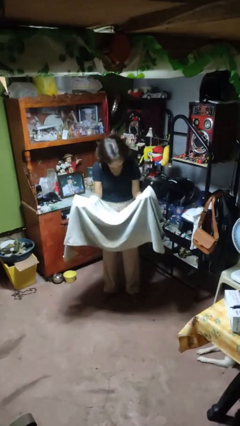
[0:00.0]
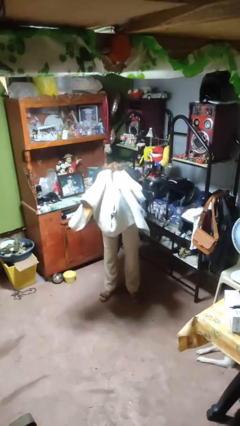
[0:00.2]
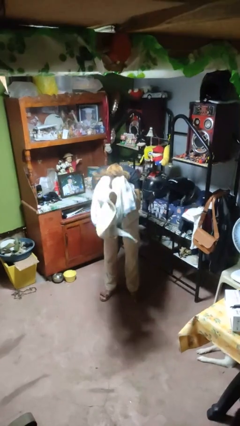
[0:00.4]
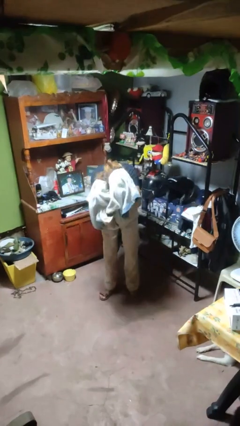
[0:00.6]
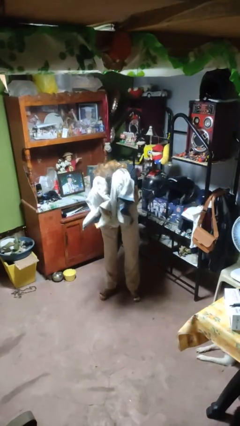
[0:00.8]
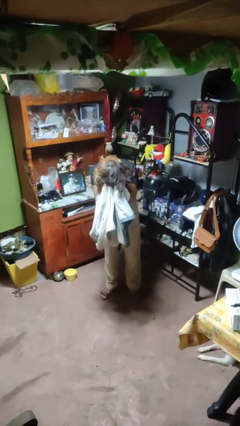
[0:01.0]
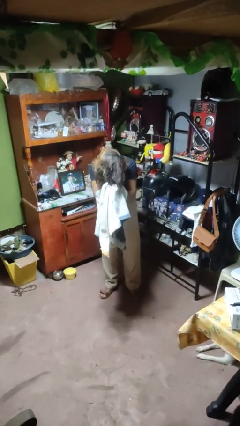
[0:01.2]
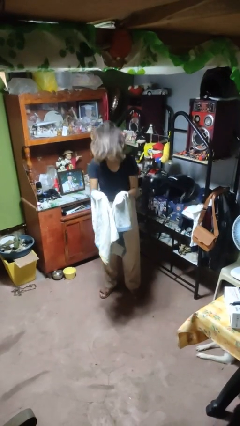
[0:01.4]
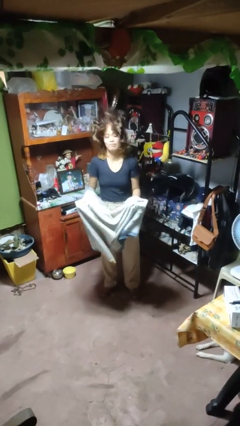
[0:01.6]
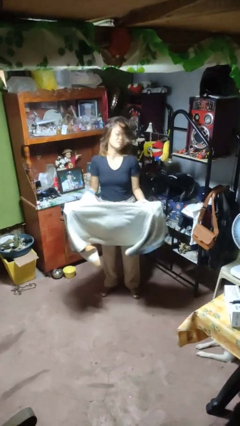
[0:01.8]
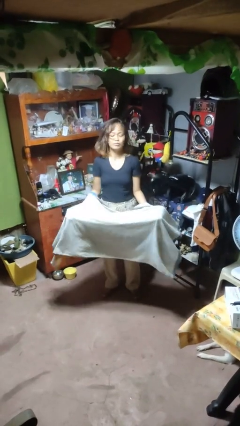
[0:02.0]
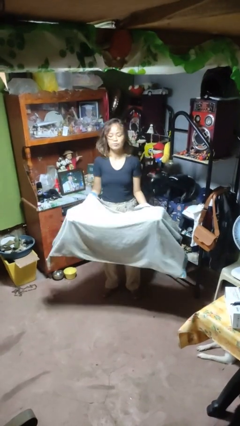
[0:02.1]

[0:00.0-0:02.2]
person dries hair with towel

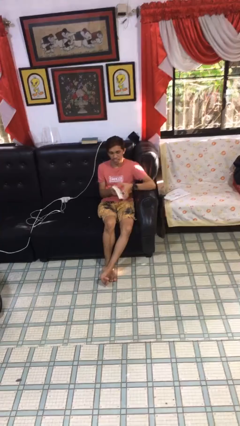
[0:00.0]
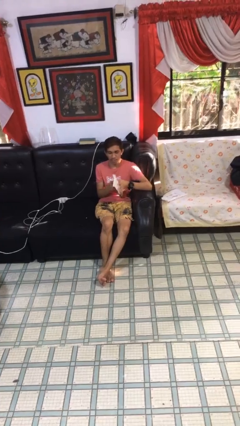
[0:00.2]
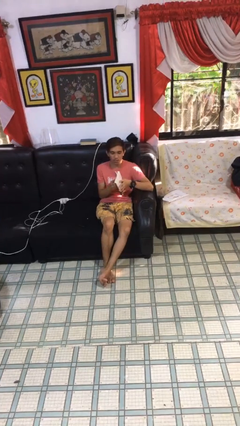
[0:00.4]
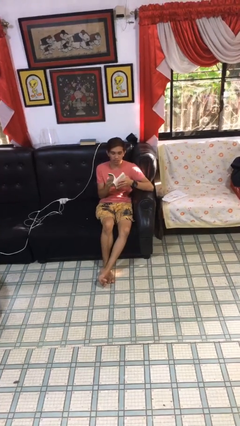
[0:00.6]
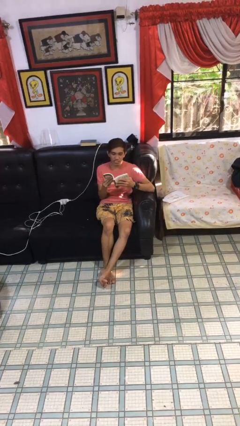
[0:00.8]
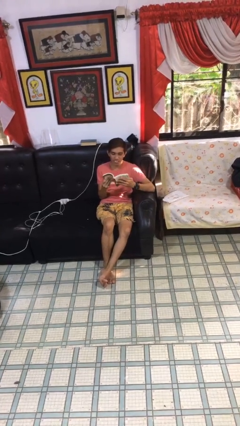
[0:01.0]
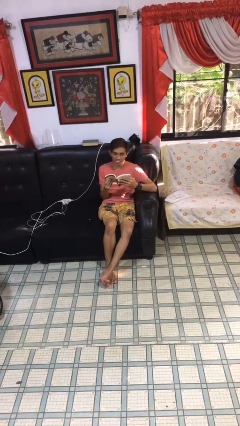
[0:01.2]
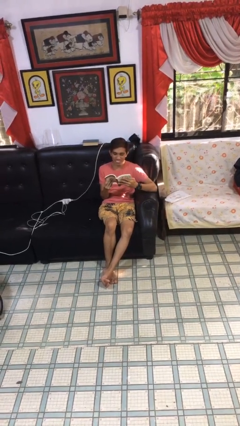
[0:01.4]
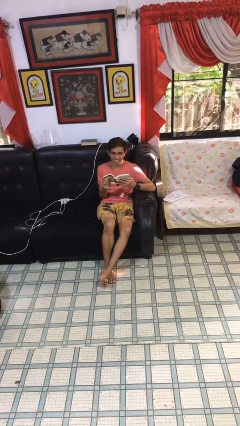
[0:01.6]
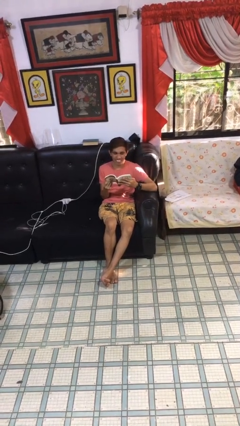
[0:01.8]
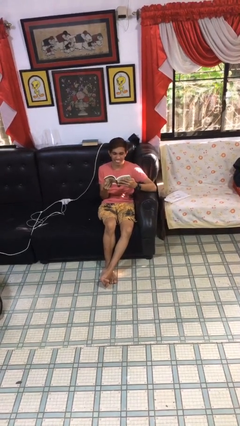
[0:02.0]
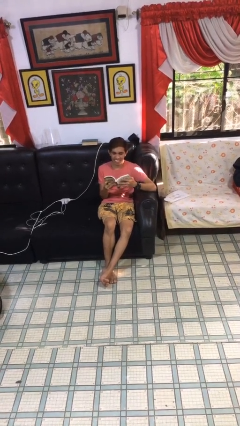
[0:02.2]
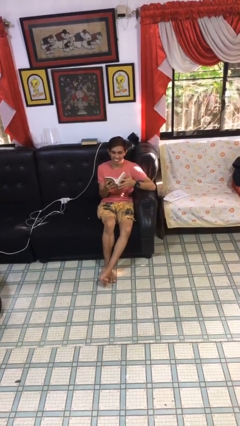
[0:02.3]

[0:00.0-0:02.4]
person reads document

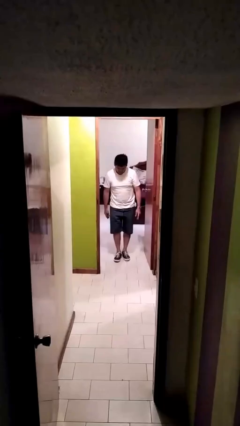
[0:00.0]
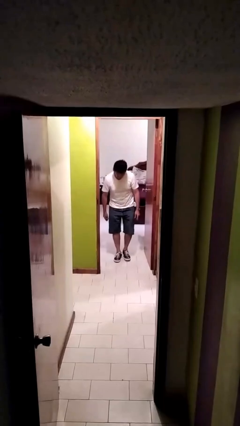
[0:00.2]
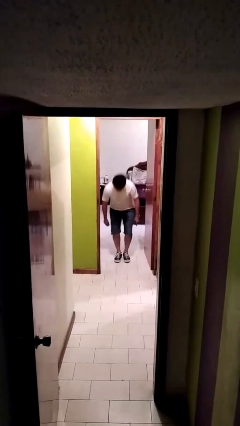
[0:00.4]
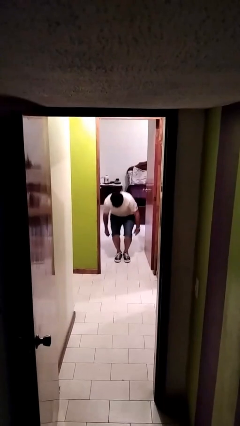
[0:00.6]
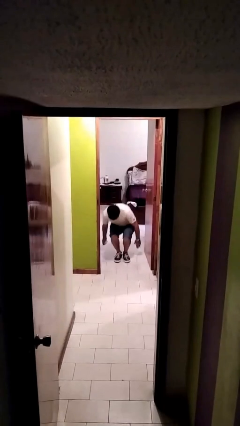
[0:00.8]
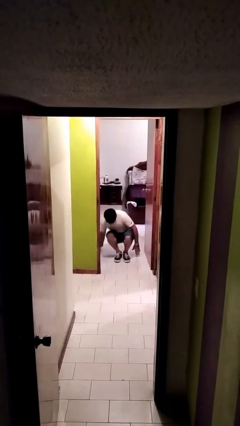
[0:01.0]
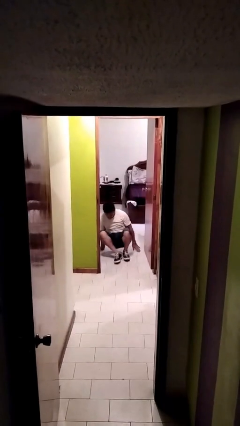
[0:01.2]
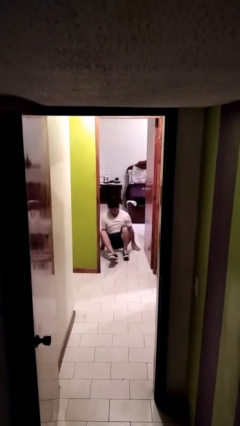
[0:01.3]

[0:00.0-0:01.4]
person sits down

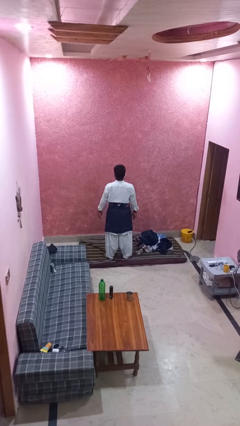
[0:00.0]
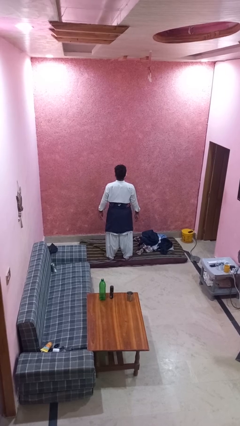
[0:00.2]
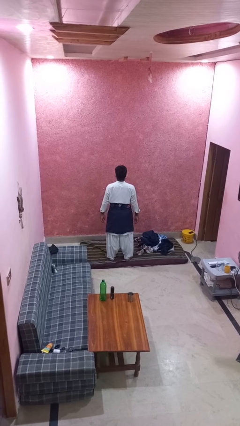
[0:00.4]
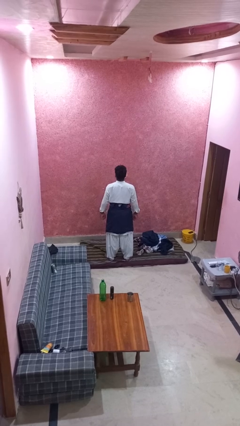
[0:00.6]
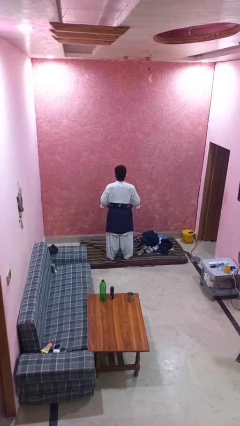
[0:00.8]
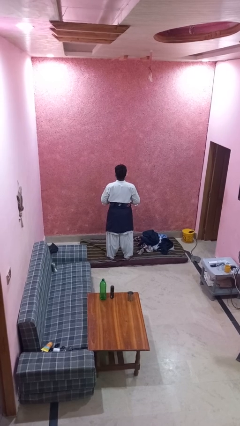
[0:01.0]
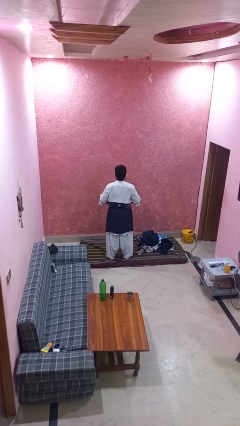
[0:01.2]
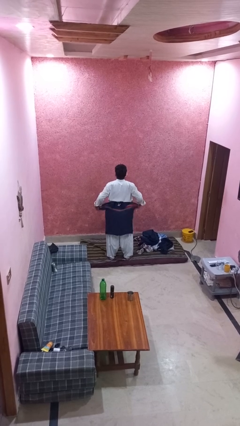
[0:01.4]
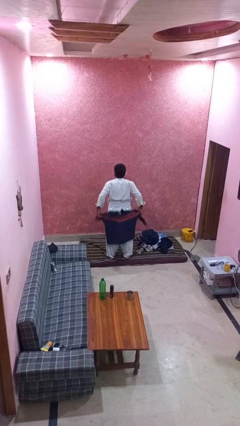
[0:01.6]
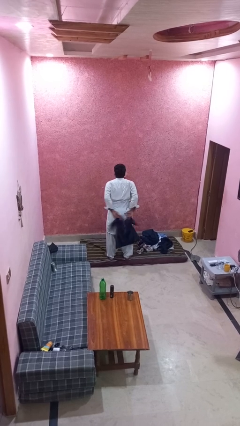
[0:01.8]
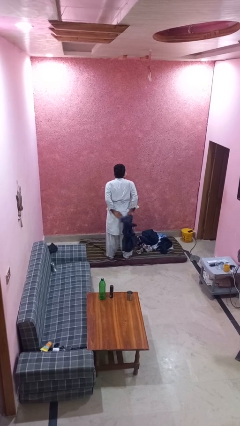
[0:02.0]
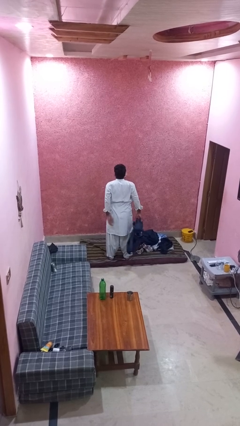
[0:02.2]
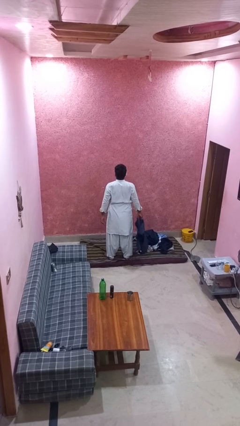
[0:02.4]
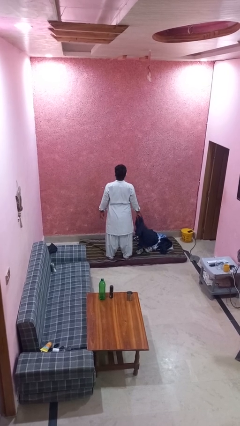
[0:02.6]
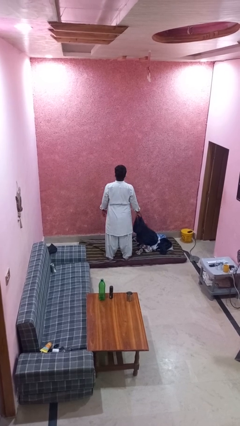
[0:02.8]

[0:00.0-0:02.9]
person unties jacket around waist

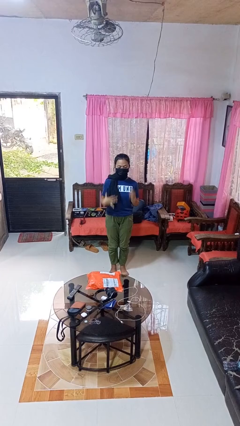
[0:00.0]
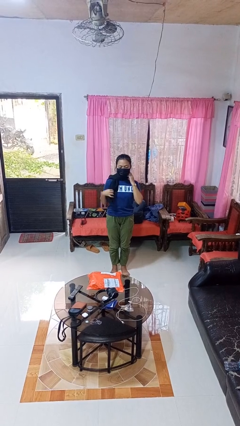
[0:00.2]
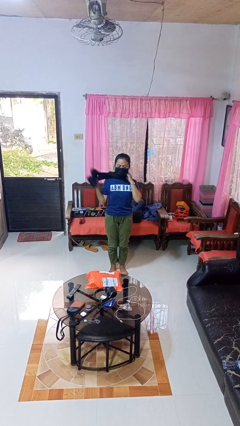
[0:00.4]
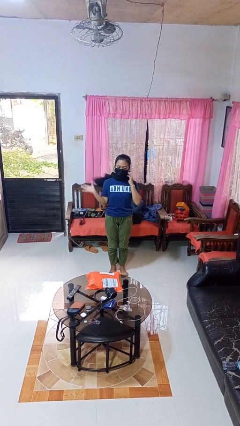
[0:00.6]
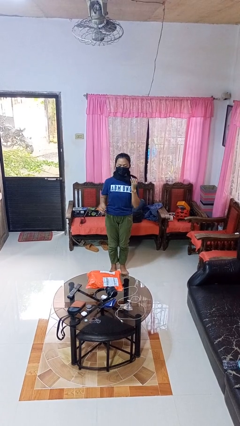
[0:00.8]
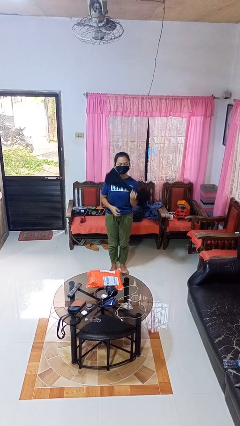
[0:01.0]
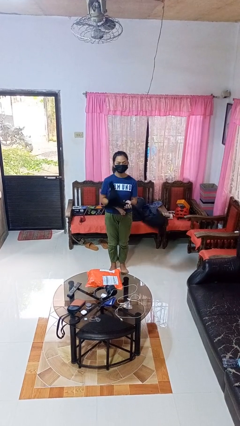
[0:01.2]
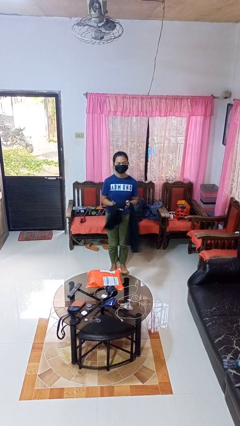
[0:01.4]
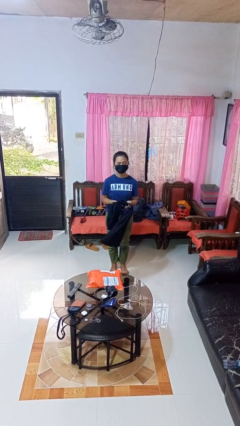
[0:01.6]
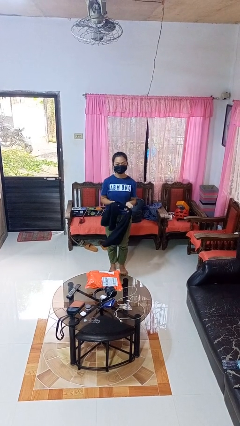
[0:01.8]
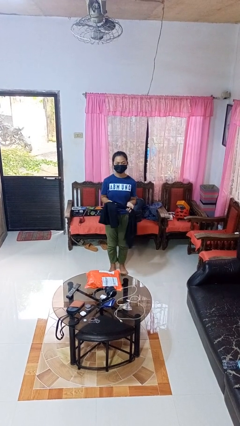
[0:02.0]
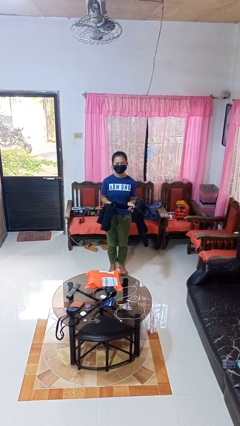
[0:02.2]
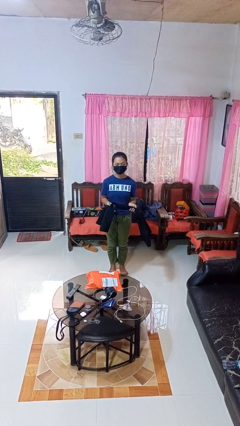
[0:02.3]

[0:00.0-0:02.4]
person takes off scarf

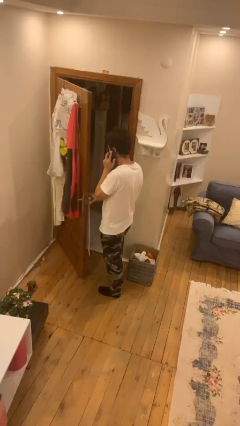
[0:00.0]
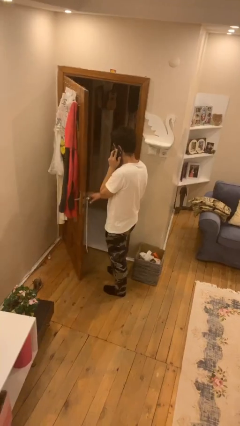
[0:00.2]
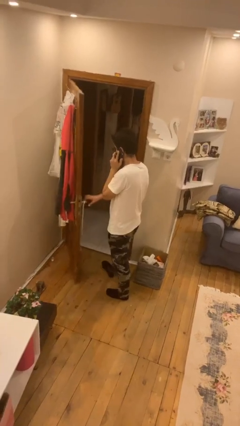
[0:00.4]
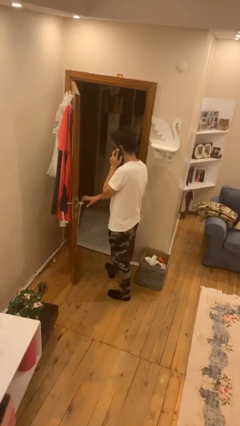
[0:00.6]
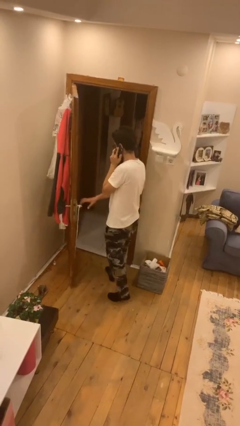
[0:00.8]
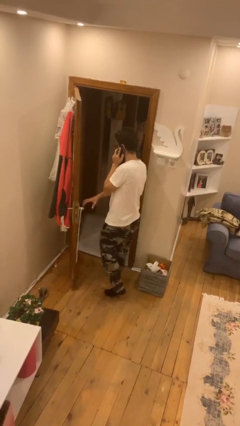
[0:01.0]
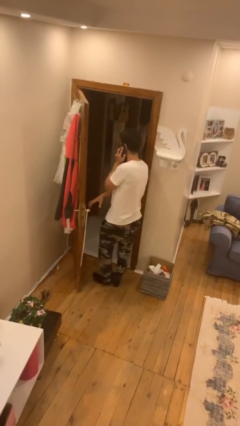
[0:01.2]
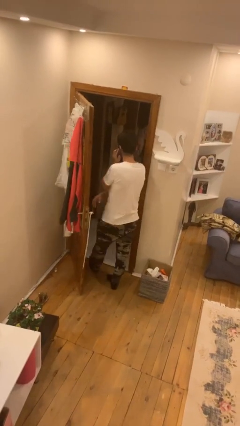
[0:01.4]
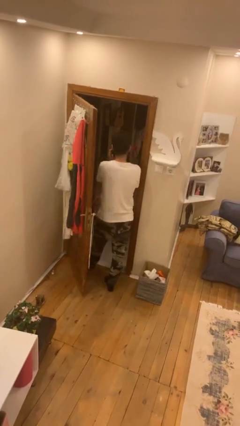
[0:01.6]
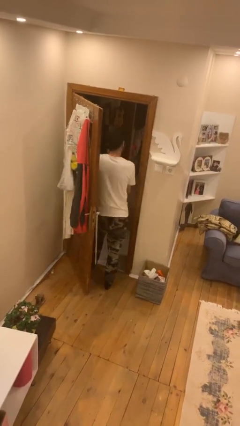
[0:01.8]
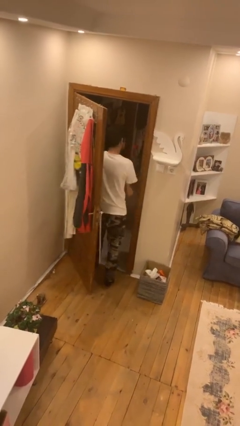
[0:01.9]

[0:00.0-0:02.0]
person exits scene through structure

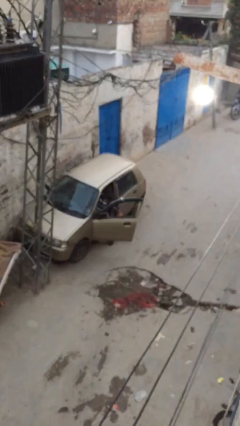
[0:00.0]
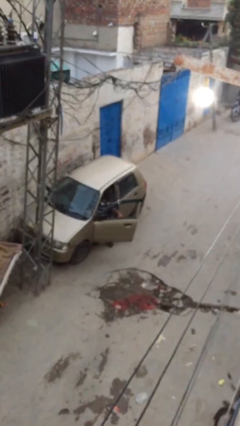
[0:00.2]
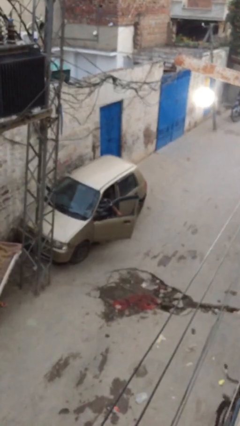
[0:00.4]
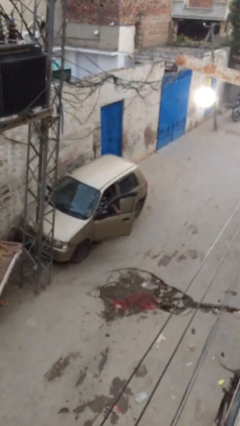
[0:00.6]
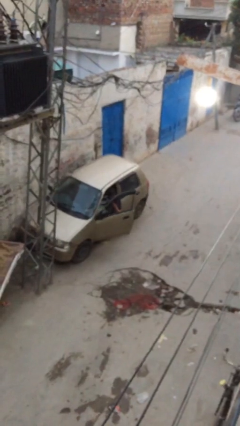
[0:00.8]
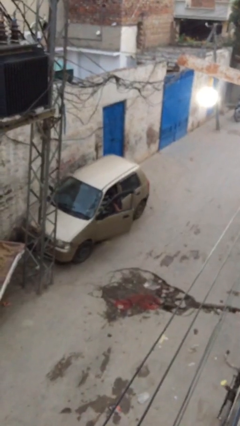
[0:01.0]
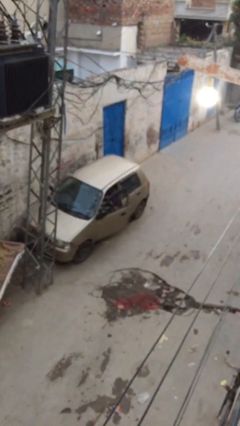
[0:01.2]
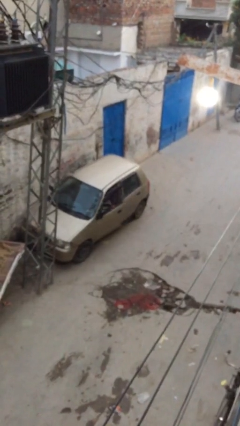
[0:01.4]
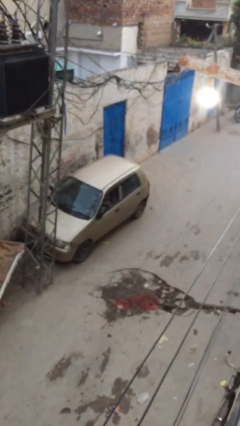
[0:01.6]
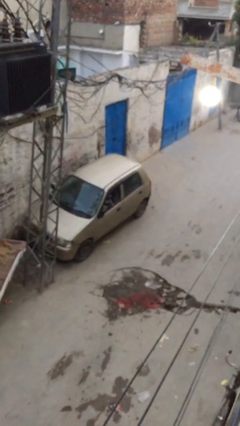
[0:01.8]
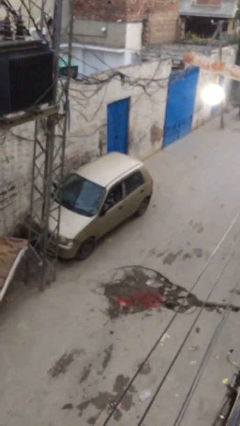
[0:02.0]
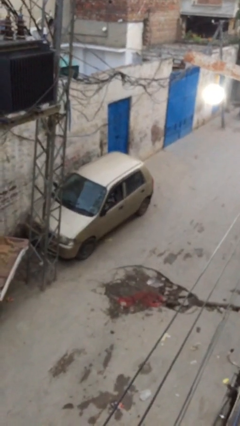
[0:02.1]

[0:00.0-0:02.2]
person closes car door

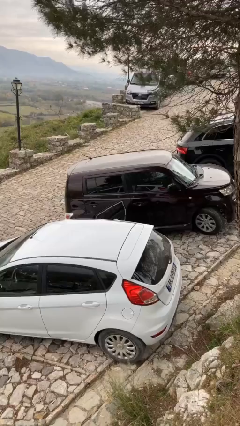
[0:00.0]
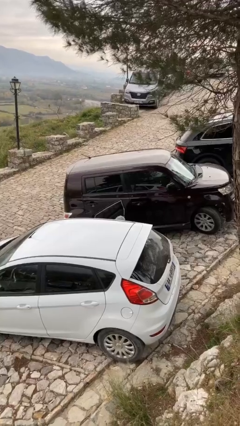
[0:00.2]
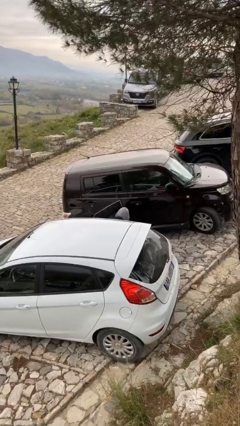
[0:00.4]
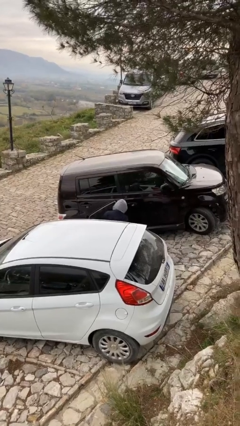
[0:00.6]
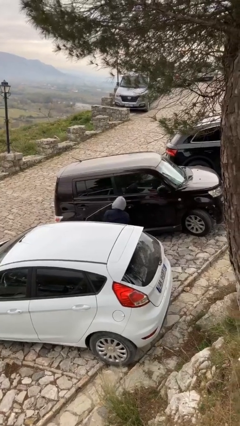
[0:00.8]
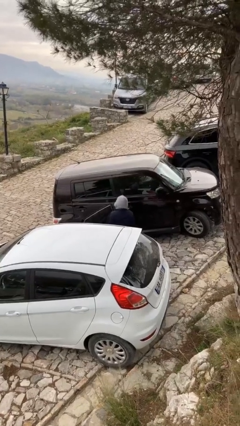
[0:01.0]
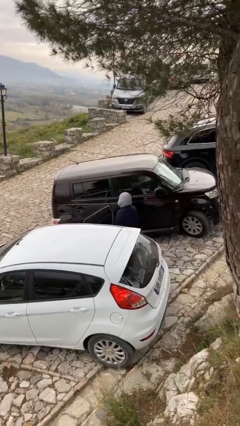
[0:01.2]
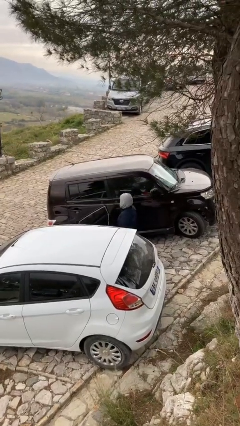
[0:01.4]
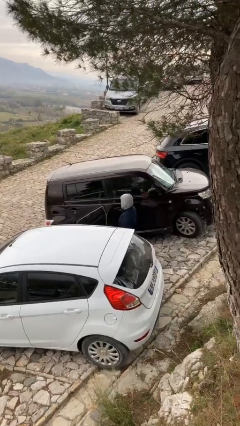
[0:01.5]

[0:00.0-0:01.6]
person exits car
